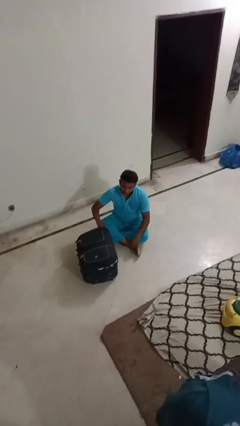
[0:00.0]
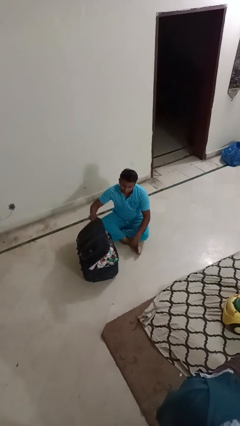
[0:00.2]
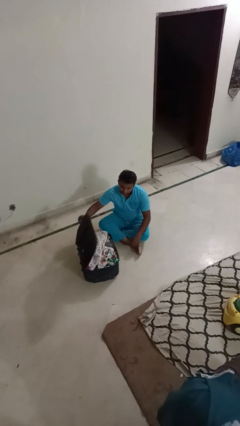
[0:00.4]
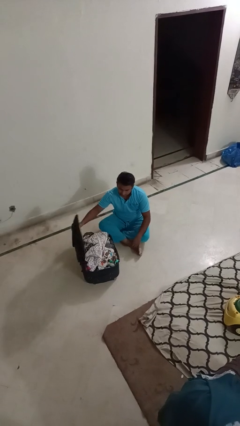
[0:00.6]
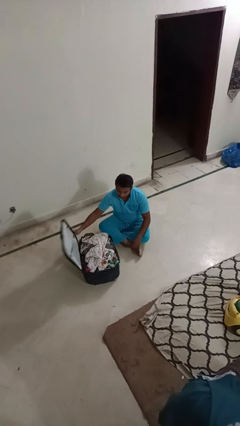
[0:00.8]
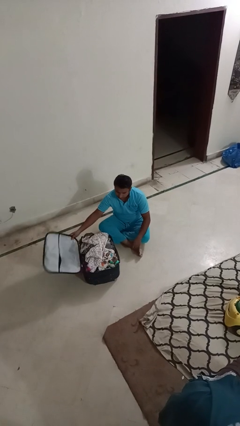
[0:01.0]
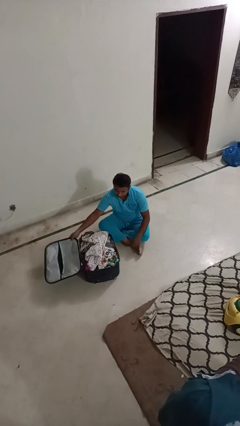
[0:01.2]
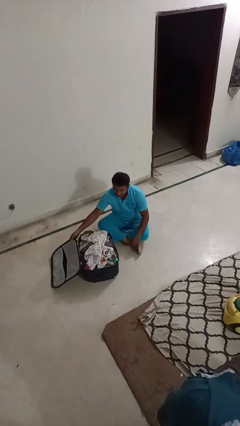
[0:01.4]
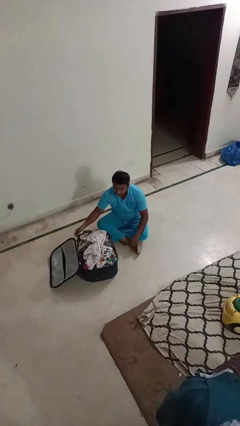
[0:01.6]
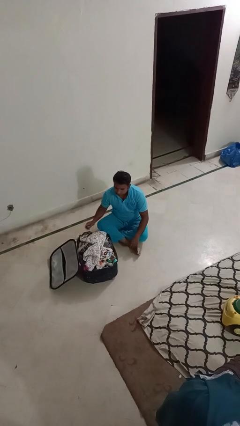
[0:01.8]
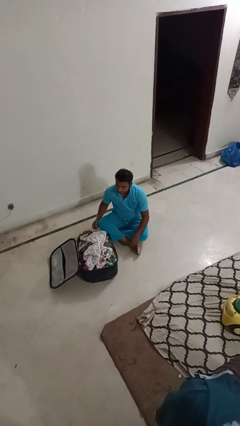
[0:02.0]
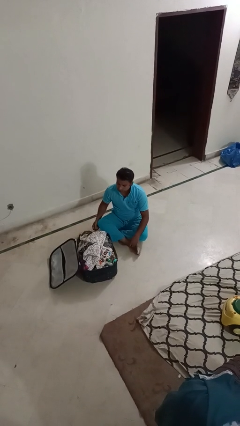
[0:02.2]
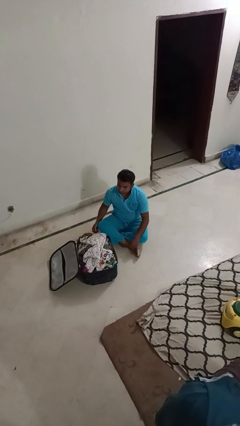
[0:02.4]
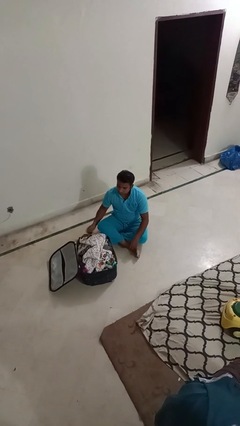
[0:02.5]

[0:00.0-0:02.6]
person opens suitcase

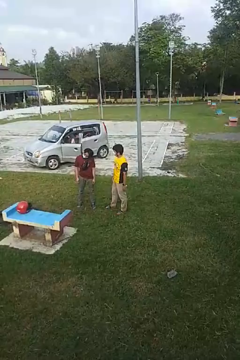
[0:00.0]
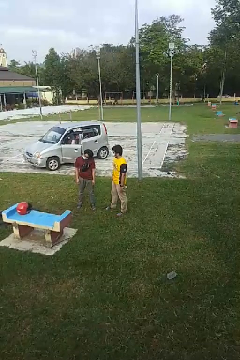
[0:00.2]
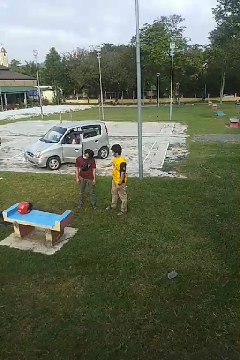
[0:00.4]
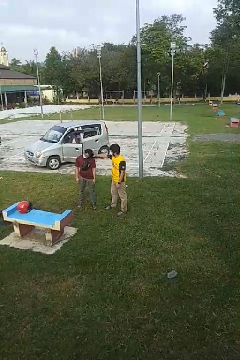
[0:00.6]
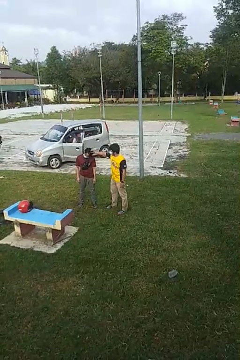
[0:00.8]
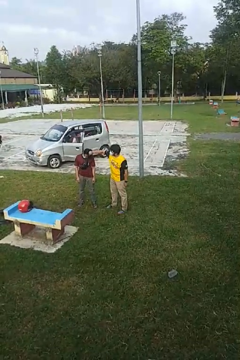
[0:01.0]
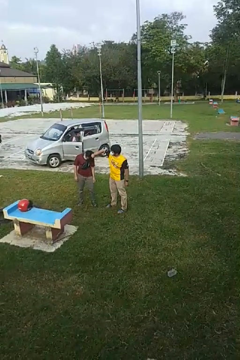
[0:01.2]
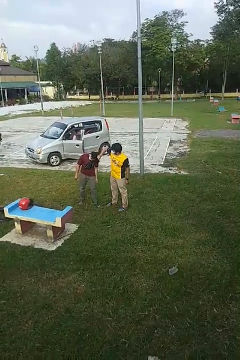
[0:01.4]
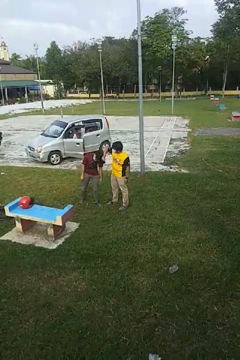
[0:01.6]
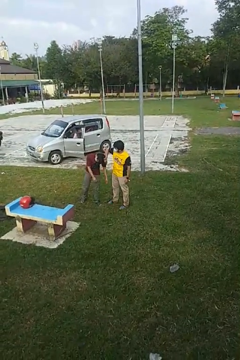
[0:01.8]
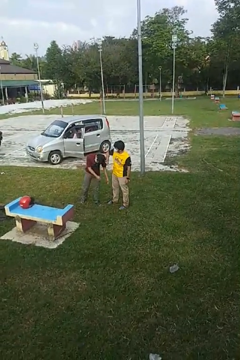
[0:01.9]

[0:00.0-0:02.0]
person grabs person by hair

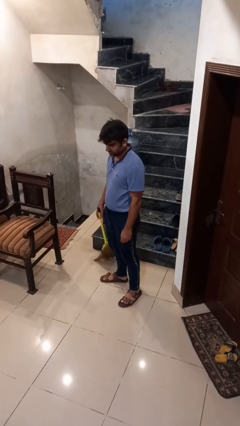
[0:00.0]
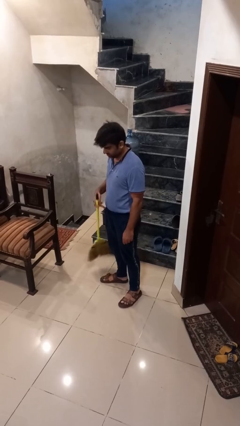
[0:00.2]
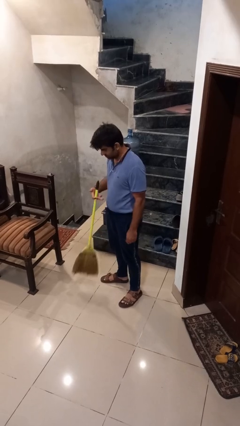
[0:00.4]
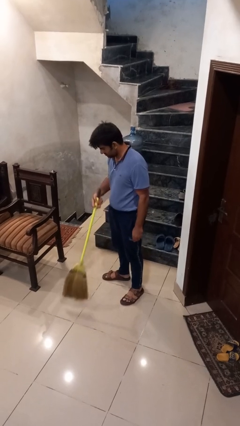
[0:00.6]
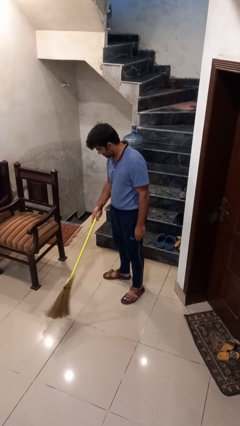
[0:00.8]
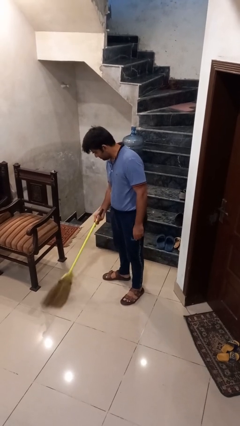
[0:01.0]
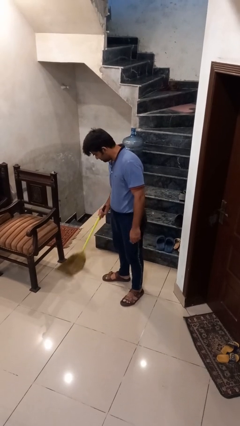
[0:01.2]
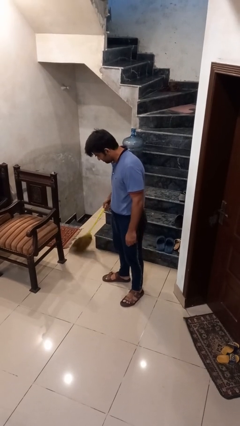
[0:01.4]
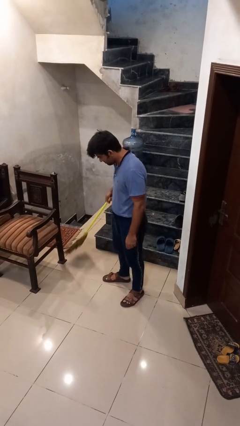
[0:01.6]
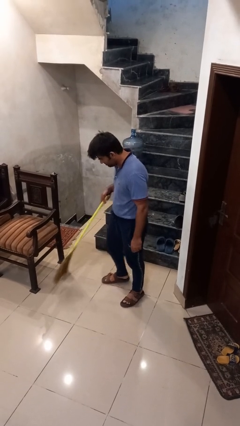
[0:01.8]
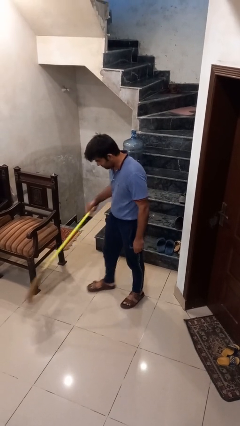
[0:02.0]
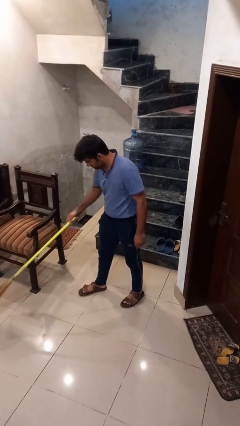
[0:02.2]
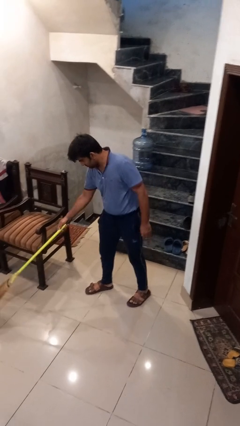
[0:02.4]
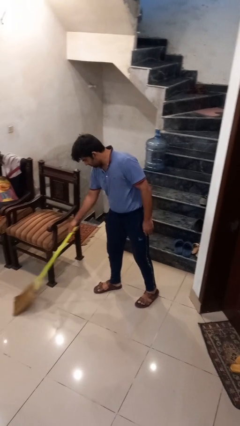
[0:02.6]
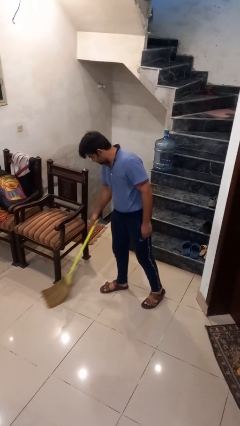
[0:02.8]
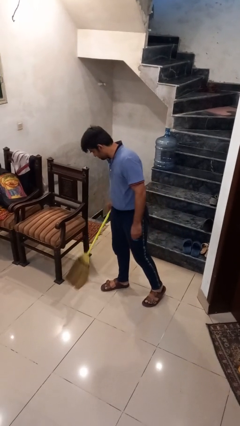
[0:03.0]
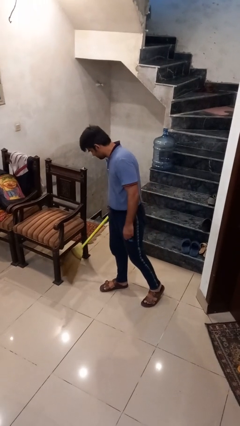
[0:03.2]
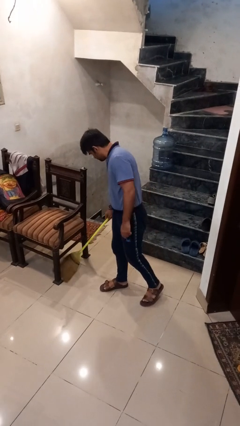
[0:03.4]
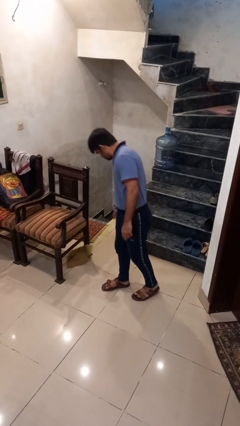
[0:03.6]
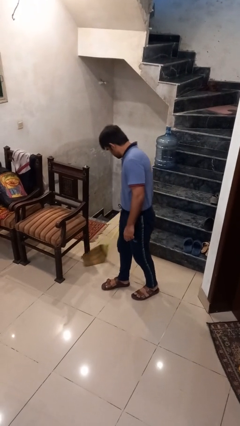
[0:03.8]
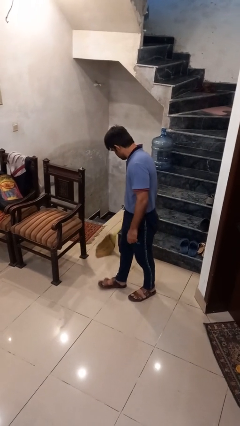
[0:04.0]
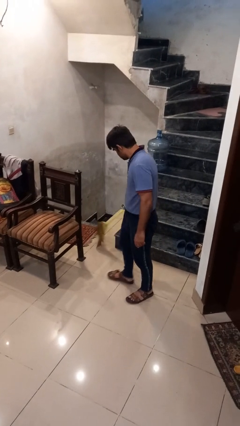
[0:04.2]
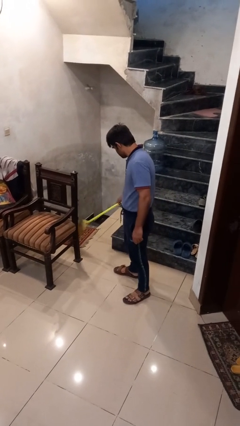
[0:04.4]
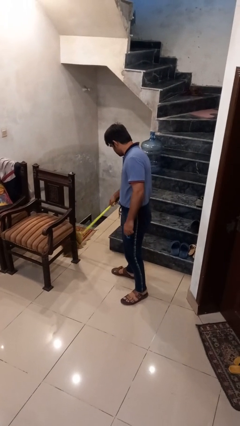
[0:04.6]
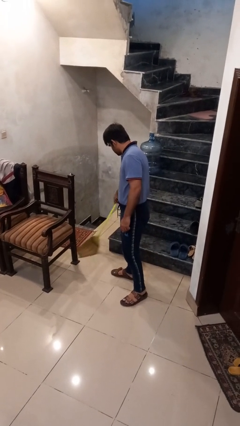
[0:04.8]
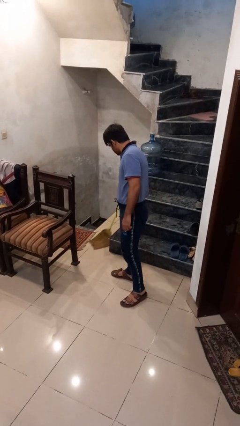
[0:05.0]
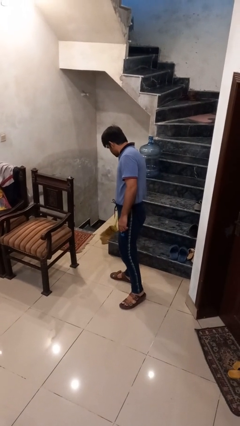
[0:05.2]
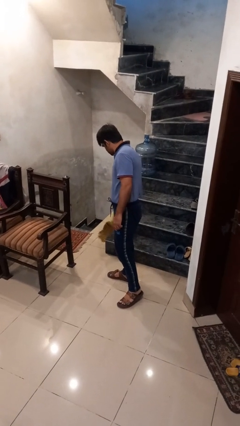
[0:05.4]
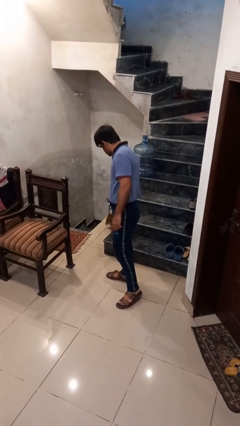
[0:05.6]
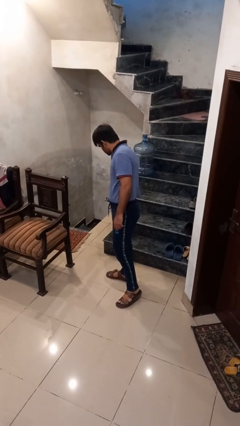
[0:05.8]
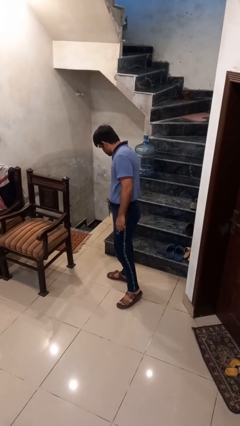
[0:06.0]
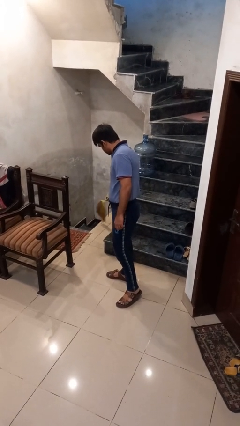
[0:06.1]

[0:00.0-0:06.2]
person sweeps floor

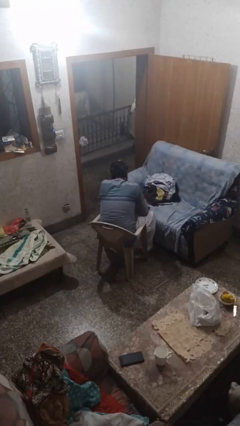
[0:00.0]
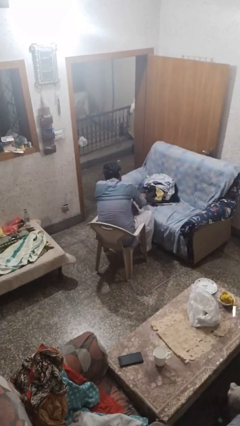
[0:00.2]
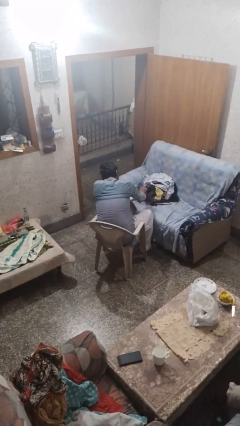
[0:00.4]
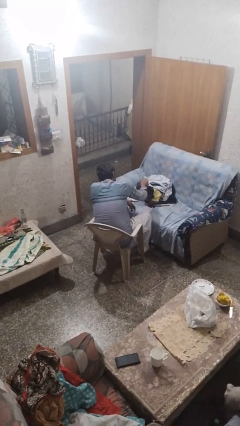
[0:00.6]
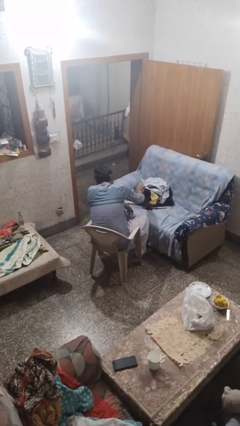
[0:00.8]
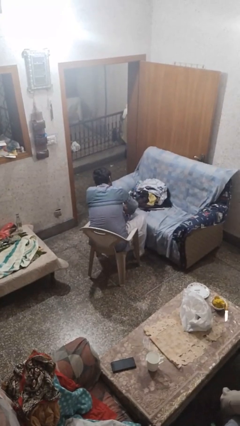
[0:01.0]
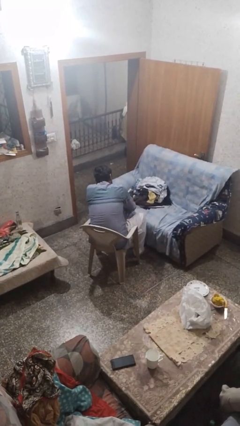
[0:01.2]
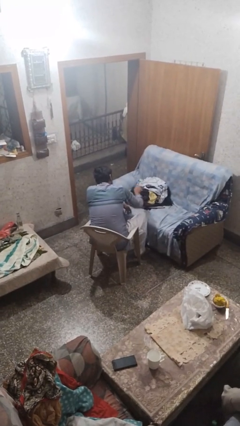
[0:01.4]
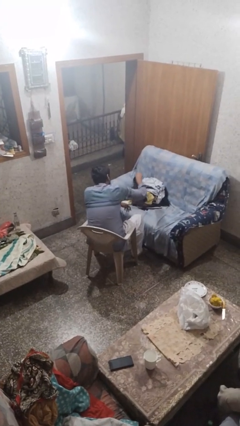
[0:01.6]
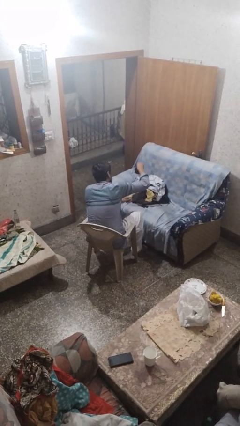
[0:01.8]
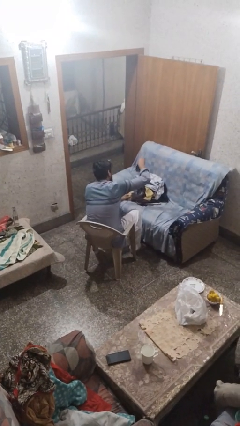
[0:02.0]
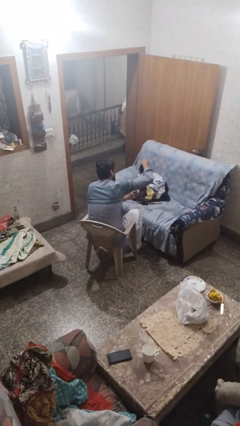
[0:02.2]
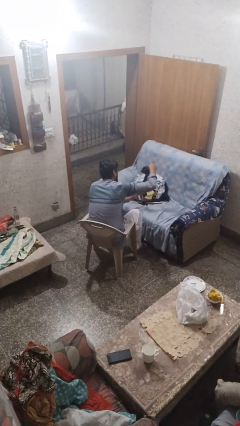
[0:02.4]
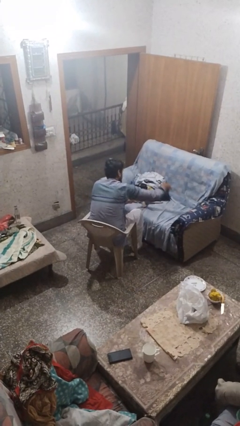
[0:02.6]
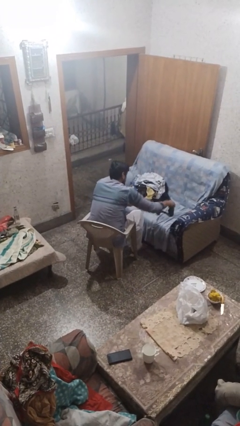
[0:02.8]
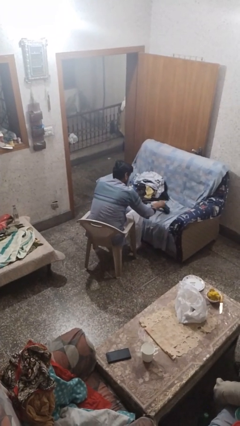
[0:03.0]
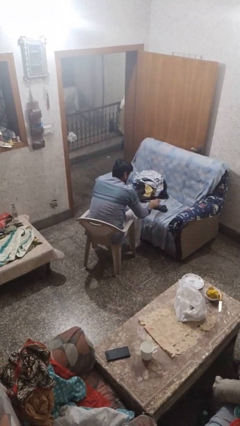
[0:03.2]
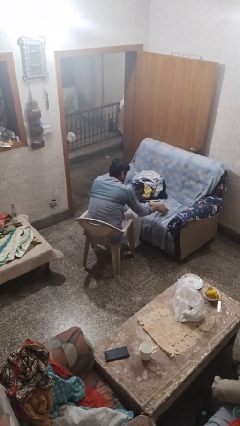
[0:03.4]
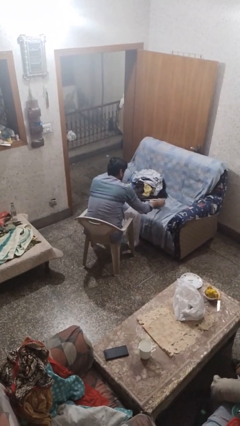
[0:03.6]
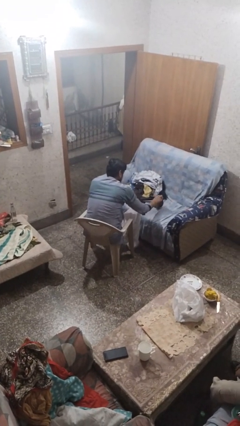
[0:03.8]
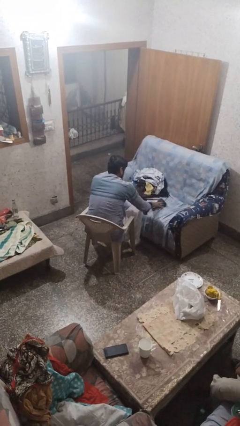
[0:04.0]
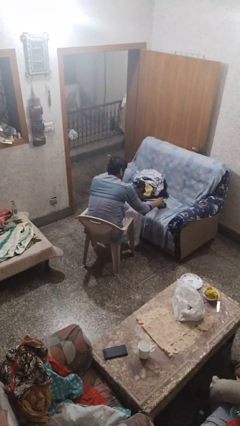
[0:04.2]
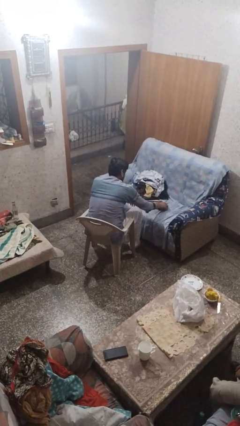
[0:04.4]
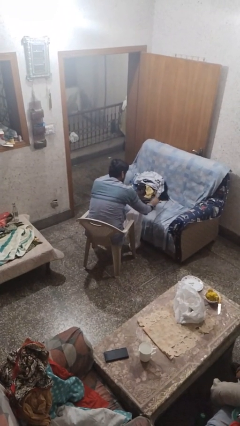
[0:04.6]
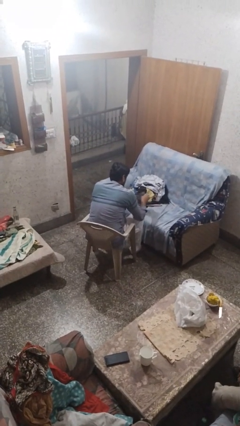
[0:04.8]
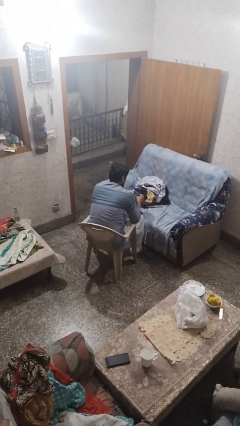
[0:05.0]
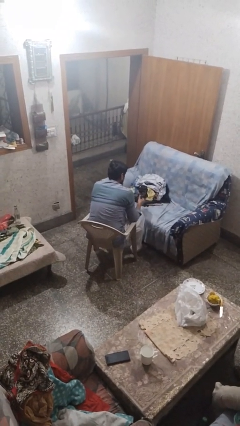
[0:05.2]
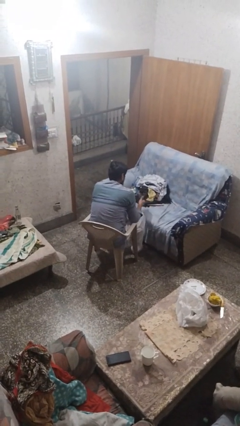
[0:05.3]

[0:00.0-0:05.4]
person folds socks

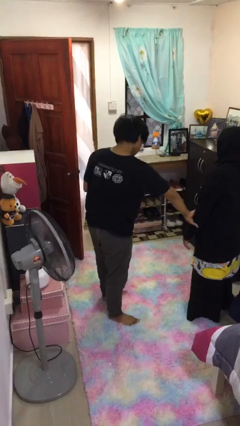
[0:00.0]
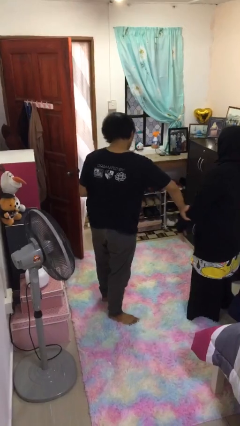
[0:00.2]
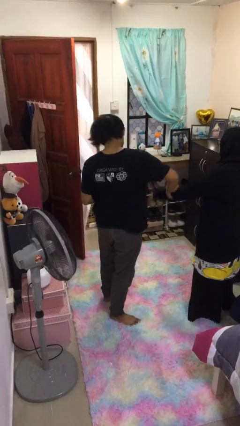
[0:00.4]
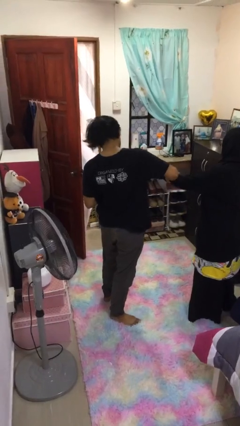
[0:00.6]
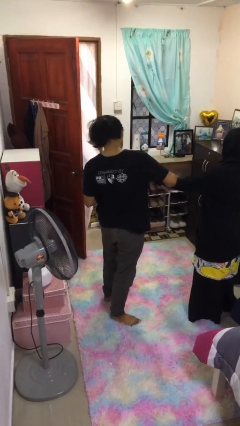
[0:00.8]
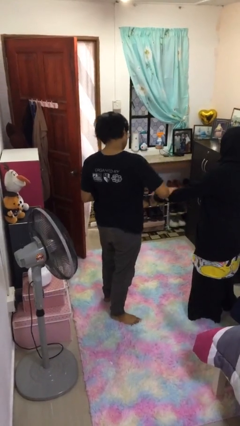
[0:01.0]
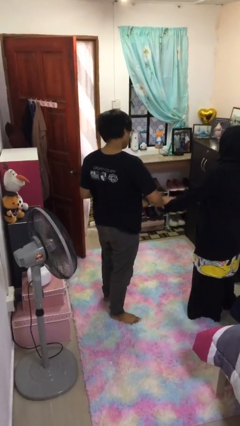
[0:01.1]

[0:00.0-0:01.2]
person grabs person by forearm

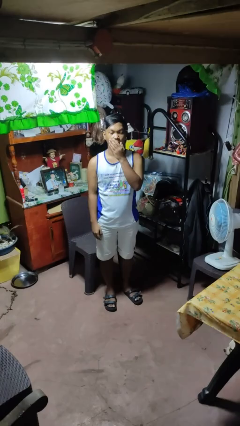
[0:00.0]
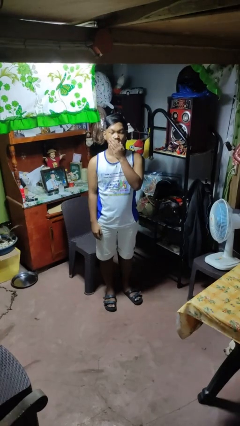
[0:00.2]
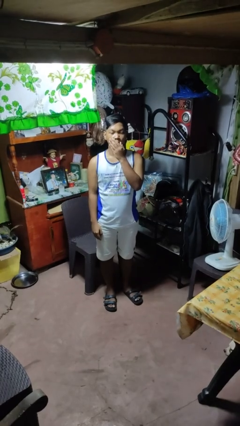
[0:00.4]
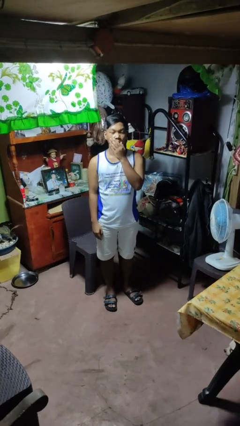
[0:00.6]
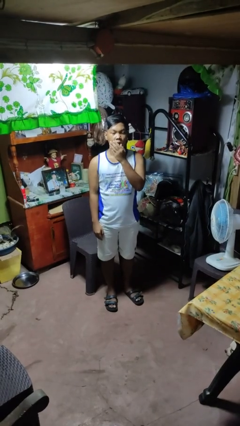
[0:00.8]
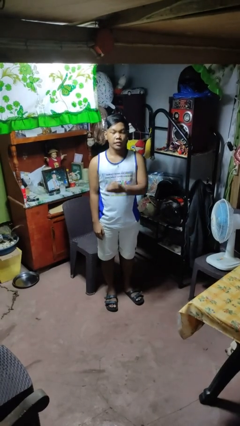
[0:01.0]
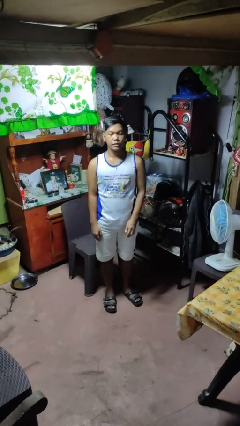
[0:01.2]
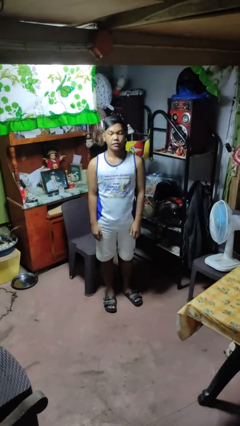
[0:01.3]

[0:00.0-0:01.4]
person yawns
